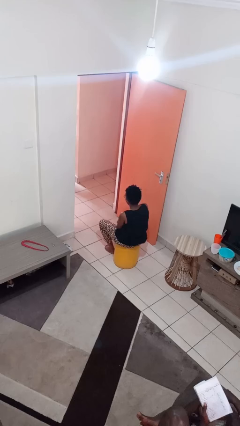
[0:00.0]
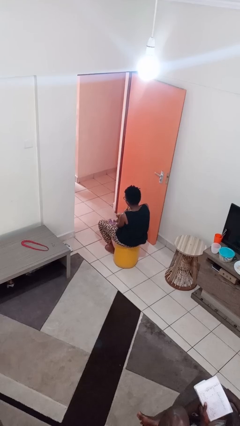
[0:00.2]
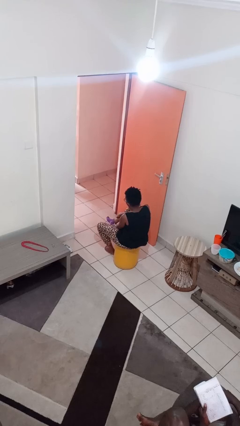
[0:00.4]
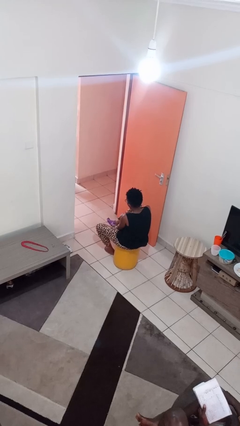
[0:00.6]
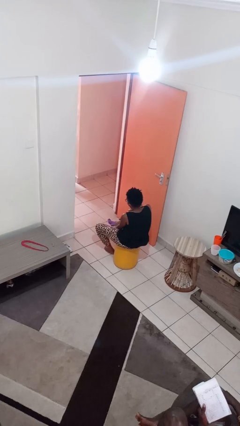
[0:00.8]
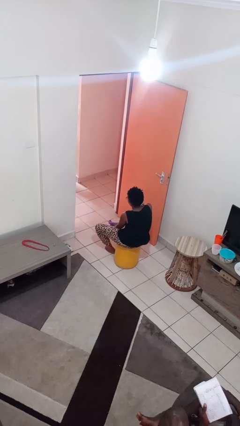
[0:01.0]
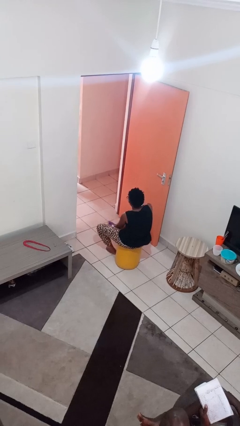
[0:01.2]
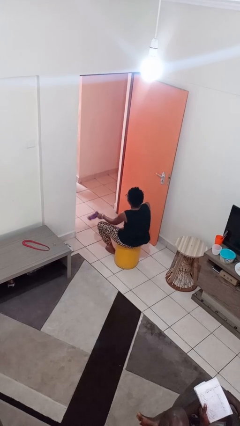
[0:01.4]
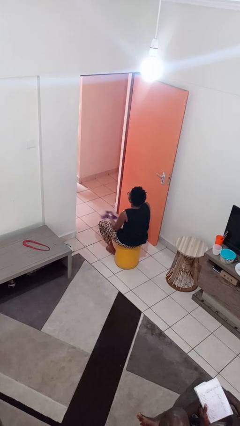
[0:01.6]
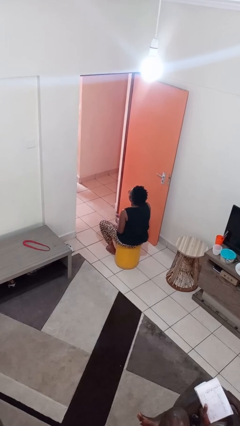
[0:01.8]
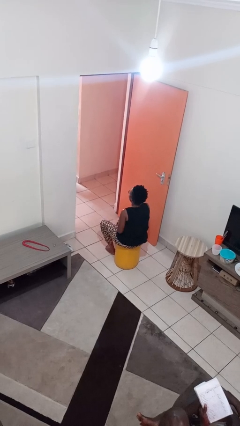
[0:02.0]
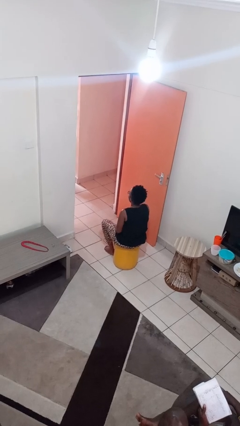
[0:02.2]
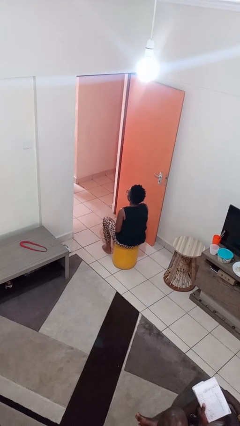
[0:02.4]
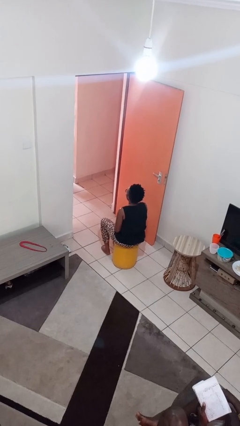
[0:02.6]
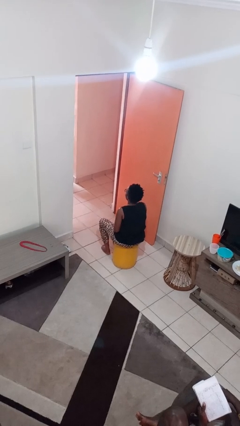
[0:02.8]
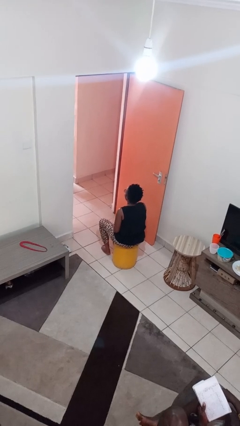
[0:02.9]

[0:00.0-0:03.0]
person takes off socks

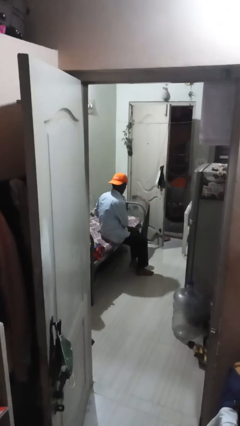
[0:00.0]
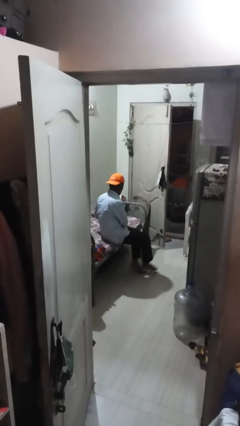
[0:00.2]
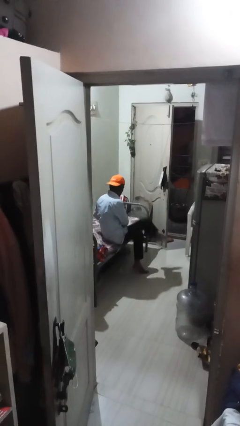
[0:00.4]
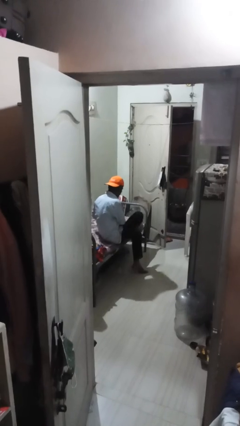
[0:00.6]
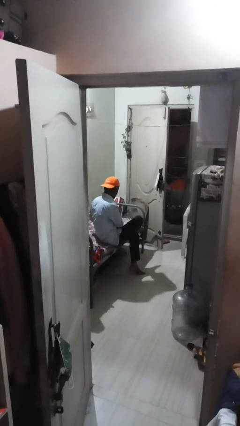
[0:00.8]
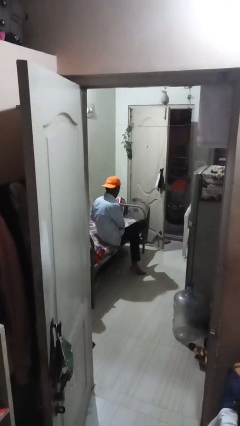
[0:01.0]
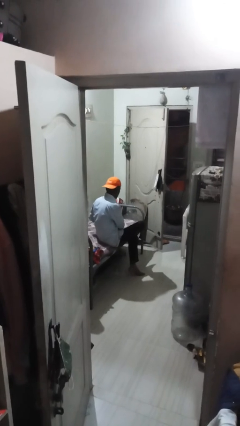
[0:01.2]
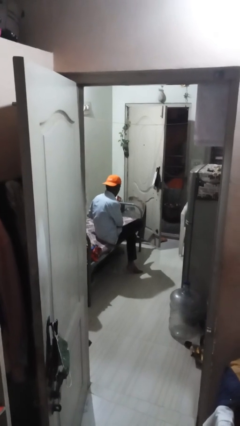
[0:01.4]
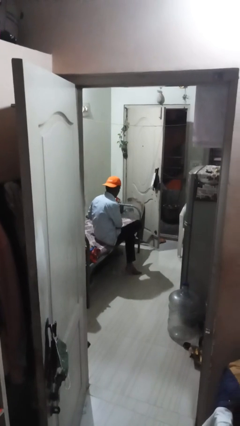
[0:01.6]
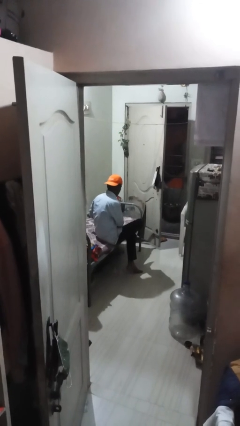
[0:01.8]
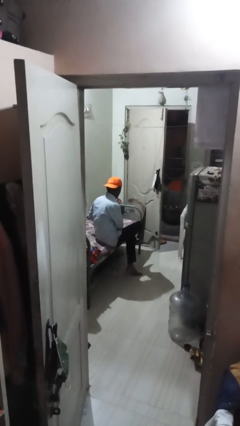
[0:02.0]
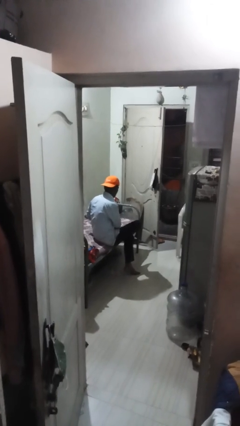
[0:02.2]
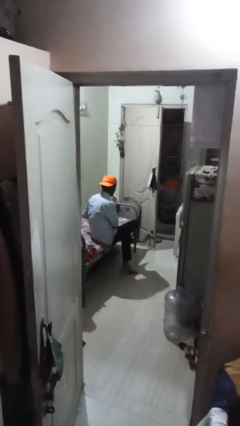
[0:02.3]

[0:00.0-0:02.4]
person crosses legs

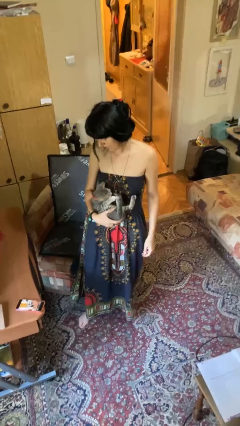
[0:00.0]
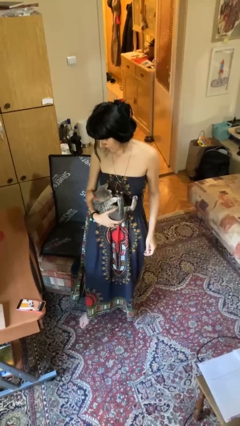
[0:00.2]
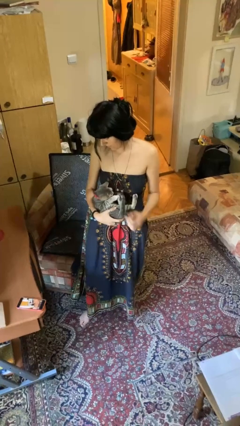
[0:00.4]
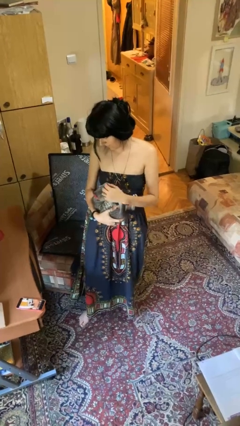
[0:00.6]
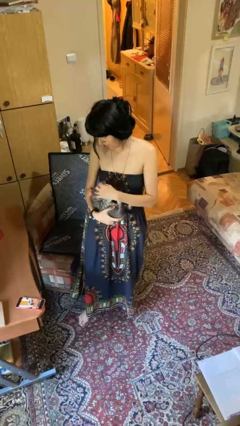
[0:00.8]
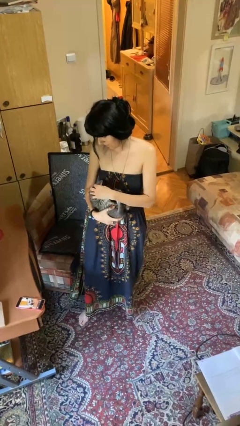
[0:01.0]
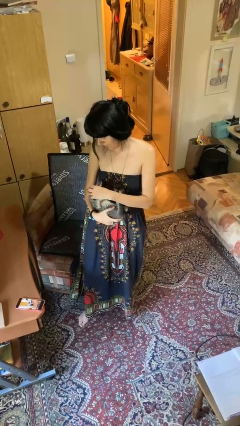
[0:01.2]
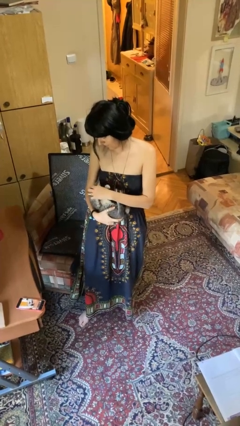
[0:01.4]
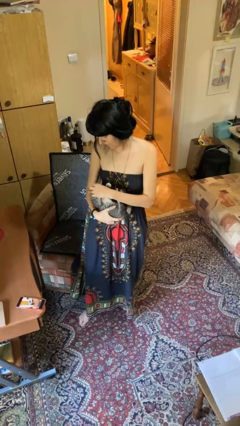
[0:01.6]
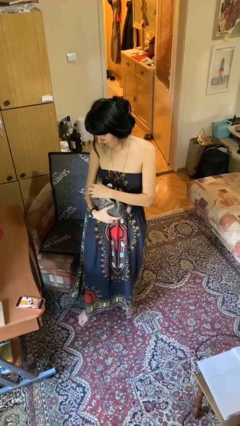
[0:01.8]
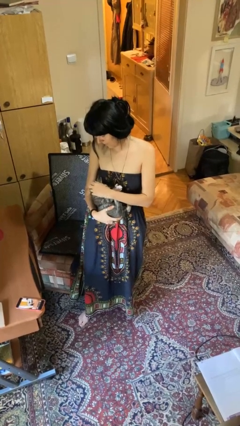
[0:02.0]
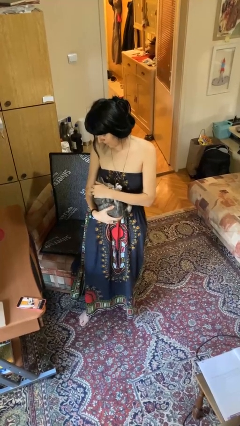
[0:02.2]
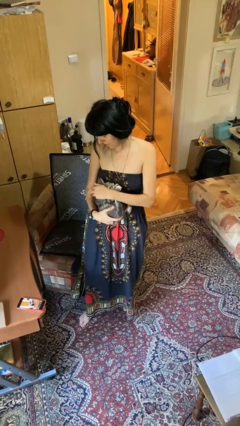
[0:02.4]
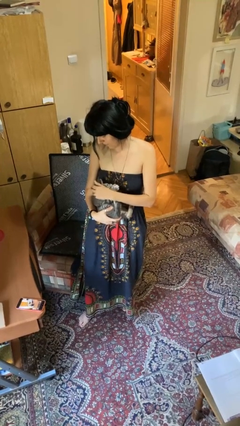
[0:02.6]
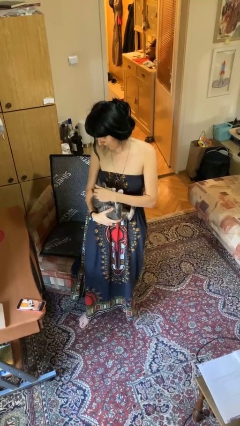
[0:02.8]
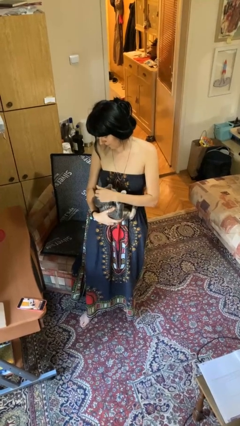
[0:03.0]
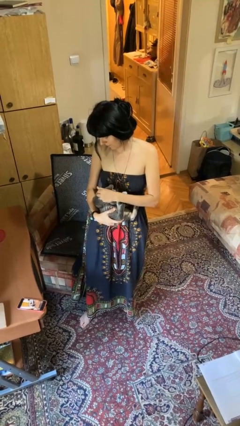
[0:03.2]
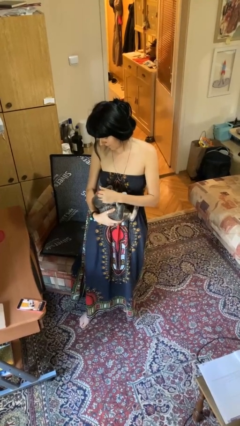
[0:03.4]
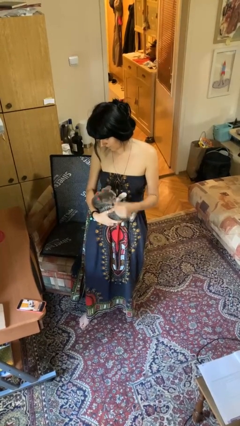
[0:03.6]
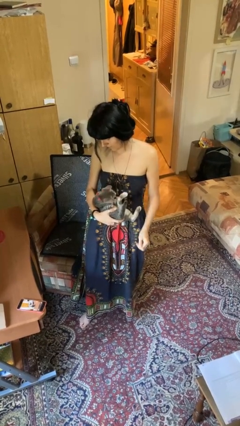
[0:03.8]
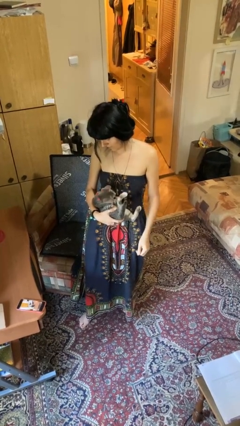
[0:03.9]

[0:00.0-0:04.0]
person pets cat

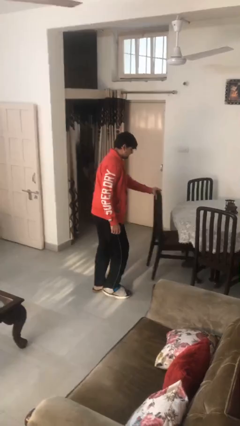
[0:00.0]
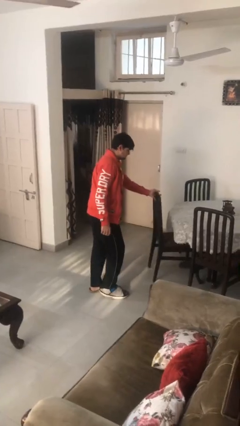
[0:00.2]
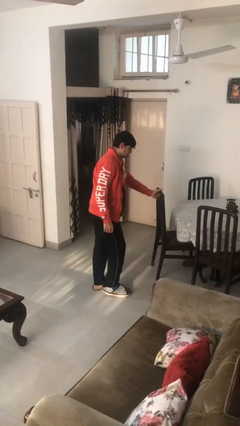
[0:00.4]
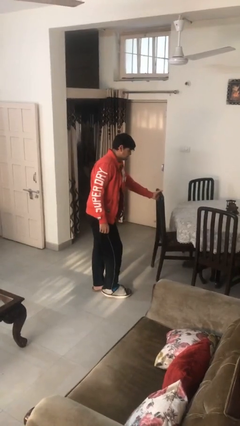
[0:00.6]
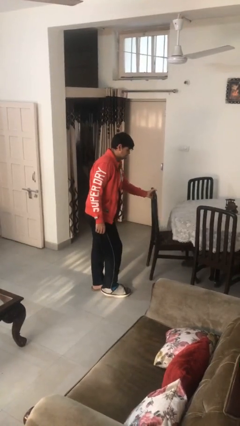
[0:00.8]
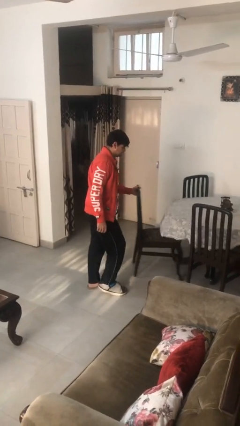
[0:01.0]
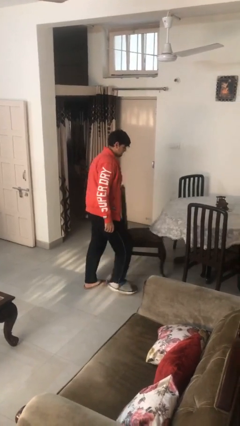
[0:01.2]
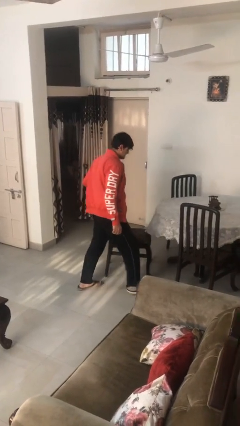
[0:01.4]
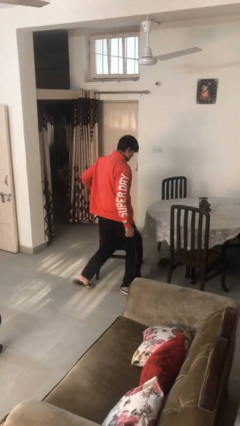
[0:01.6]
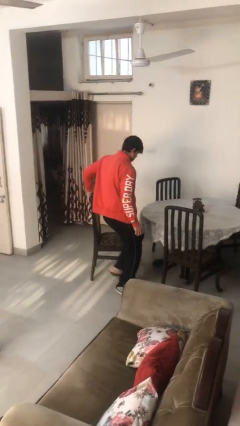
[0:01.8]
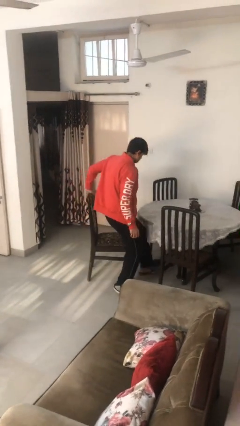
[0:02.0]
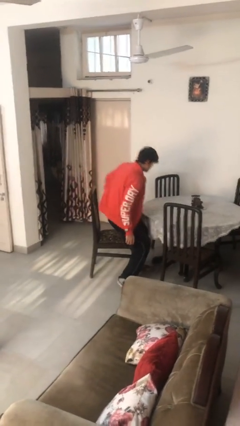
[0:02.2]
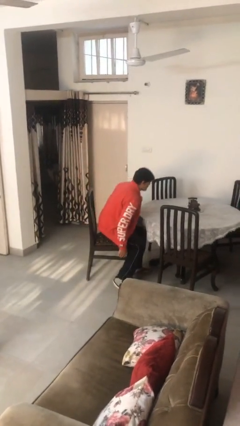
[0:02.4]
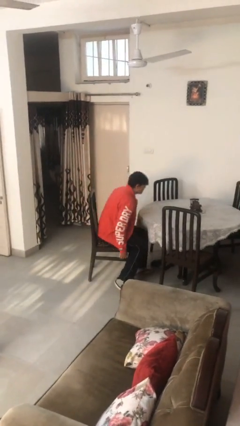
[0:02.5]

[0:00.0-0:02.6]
person sits down

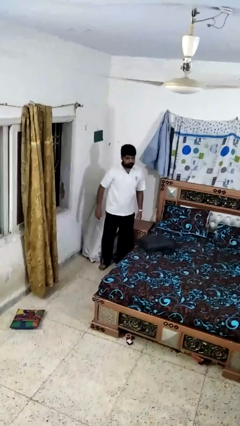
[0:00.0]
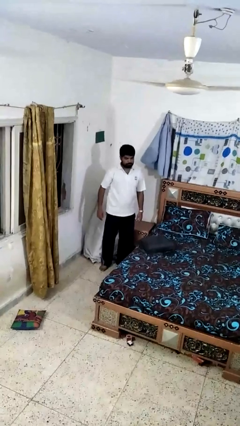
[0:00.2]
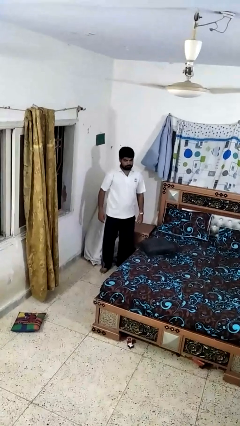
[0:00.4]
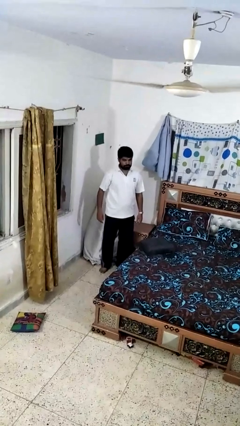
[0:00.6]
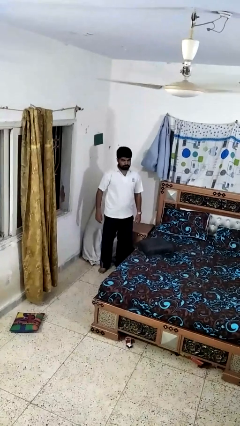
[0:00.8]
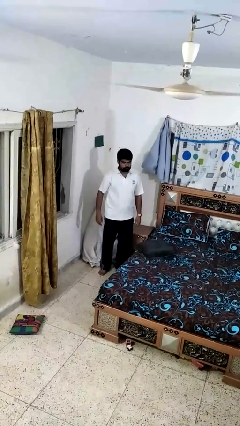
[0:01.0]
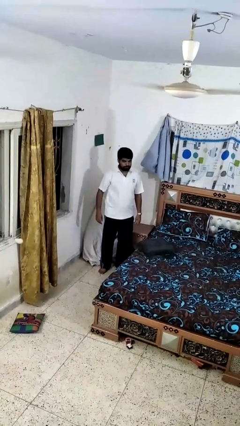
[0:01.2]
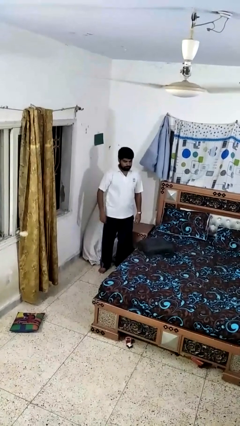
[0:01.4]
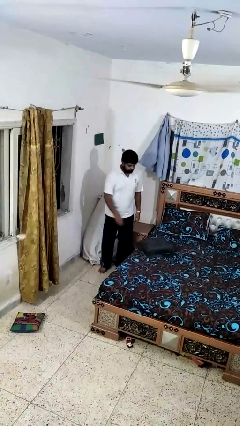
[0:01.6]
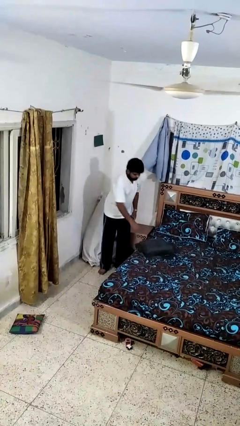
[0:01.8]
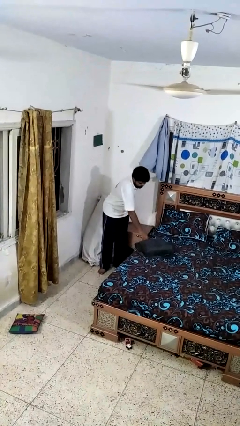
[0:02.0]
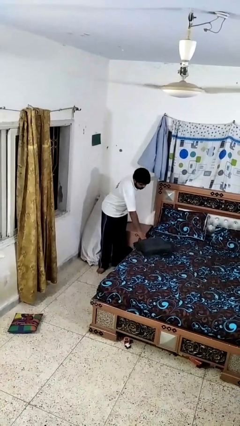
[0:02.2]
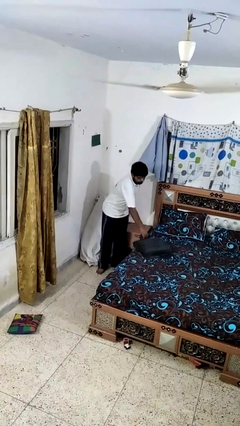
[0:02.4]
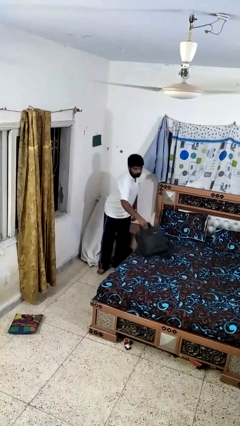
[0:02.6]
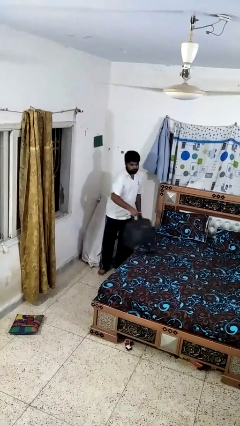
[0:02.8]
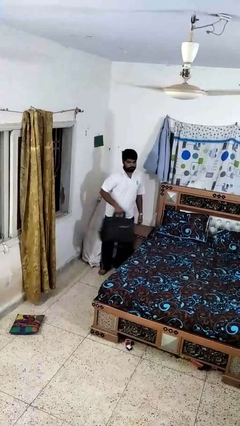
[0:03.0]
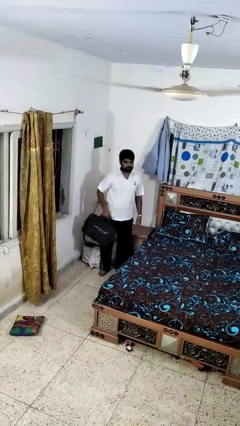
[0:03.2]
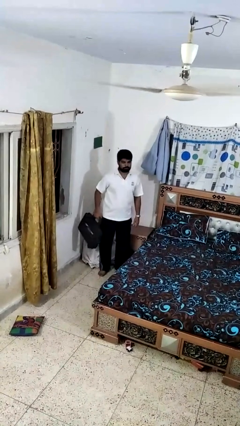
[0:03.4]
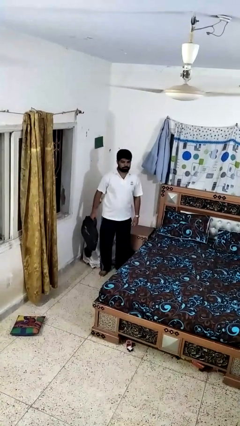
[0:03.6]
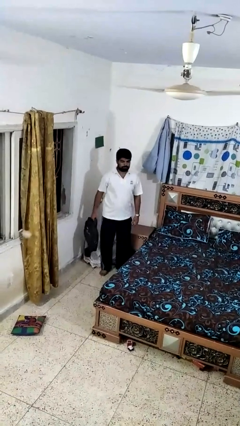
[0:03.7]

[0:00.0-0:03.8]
person picks up object from bed

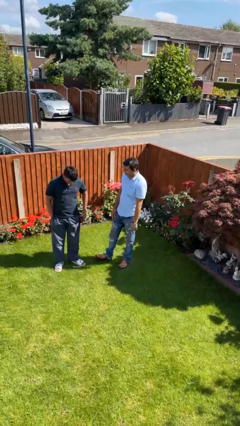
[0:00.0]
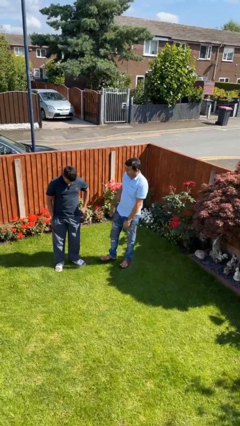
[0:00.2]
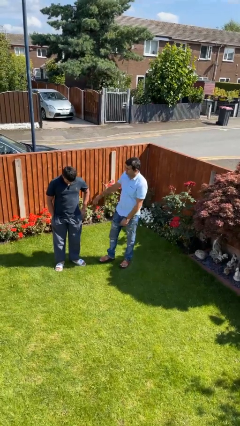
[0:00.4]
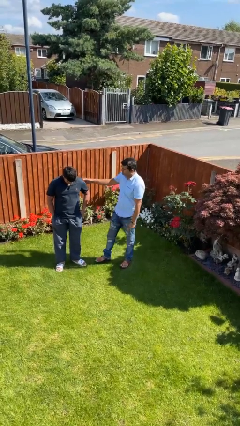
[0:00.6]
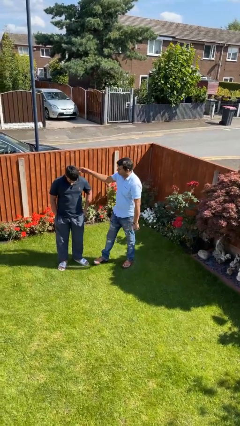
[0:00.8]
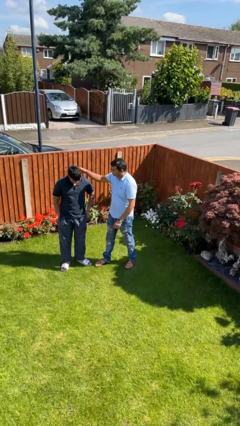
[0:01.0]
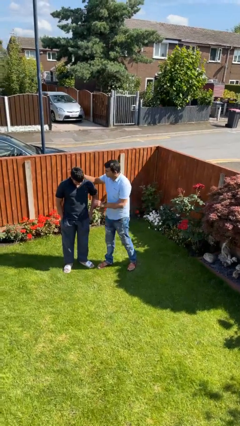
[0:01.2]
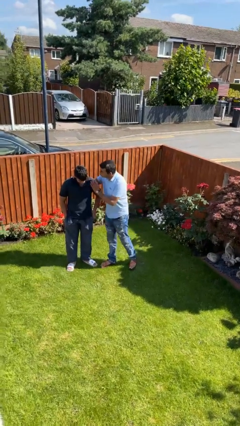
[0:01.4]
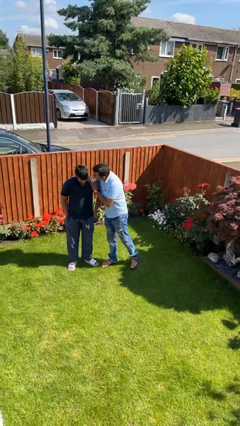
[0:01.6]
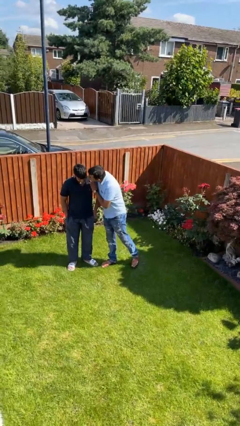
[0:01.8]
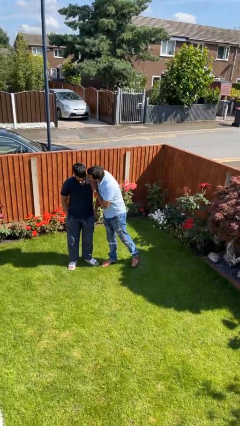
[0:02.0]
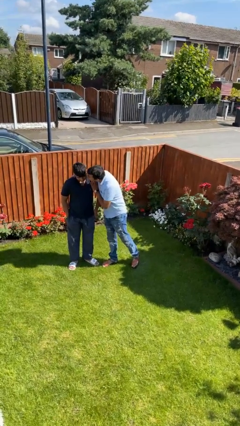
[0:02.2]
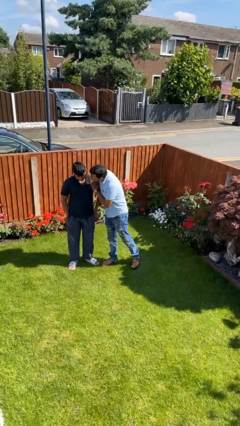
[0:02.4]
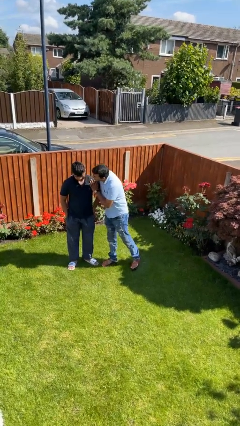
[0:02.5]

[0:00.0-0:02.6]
person kisses cheek of person
